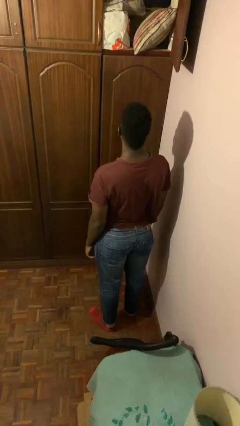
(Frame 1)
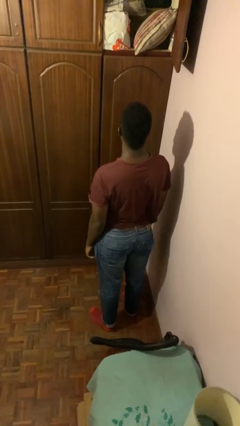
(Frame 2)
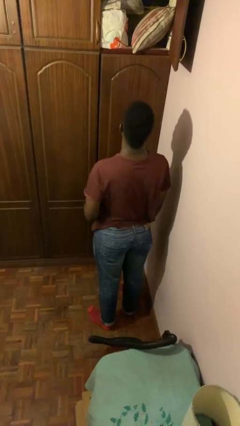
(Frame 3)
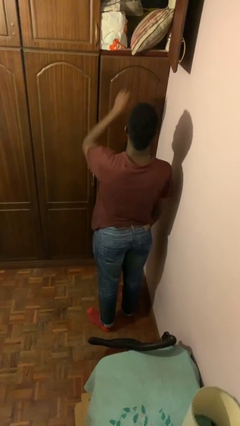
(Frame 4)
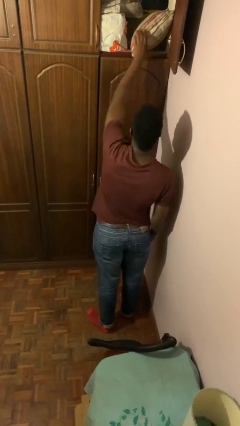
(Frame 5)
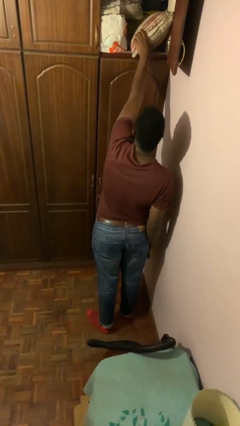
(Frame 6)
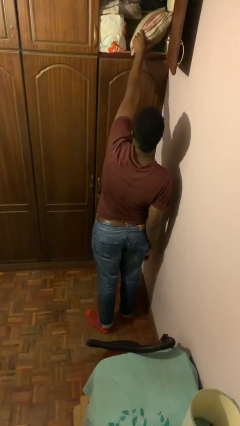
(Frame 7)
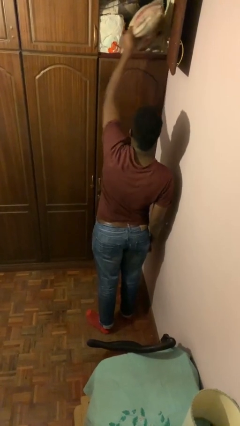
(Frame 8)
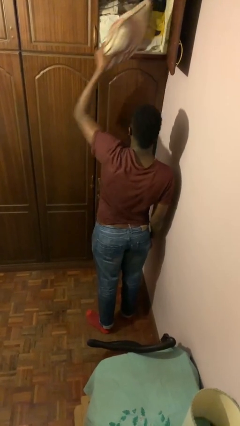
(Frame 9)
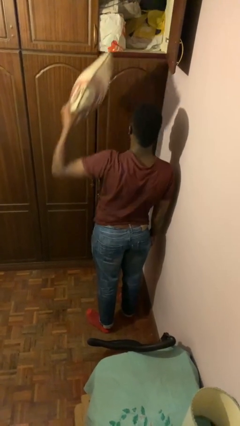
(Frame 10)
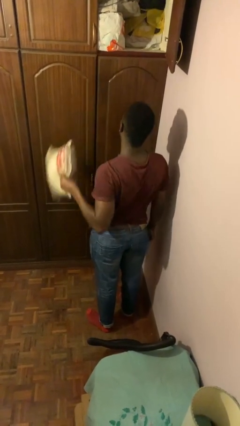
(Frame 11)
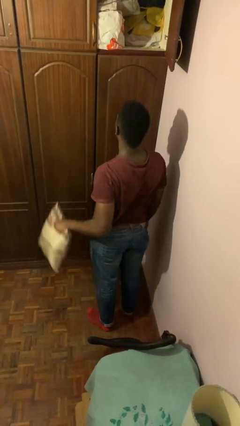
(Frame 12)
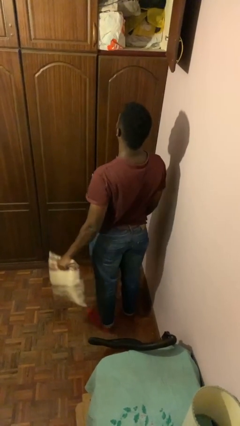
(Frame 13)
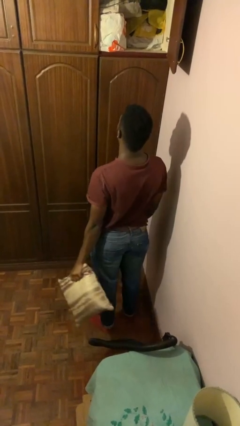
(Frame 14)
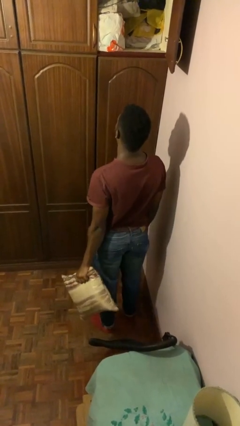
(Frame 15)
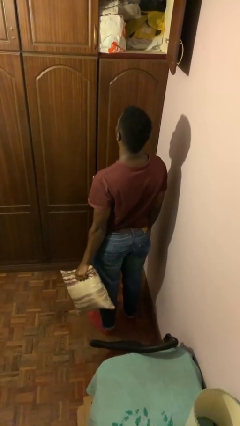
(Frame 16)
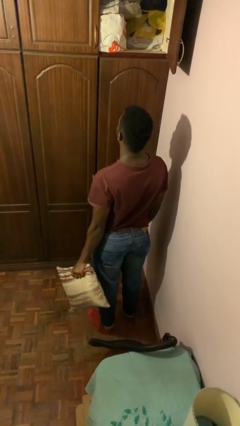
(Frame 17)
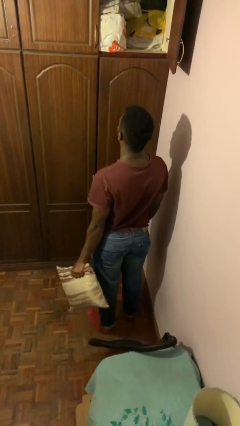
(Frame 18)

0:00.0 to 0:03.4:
person picks up object from shelf

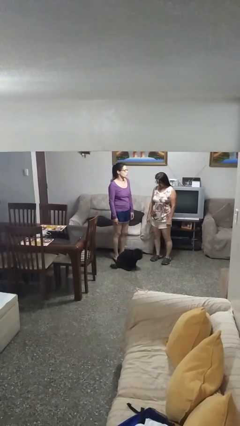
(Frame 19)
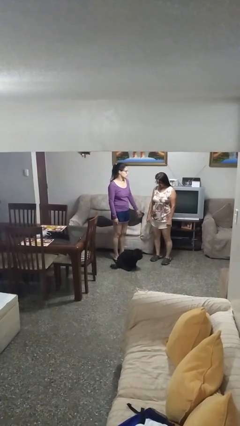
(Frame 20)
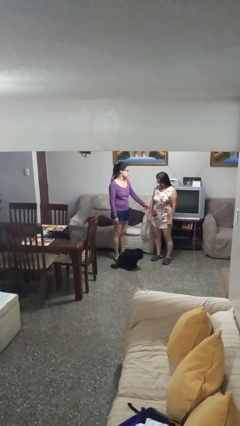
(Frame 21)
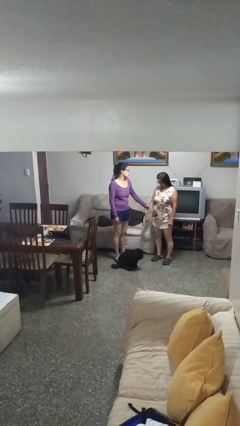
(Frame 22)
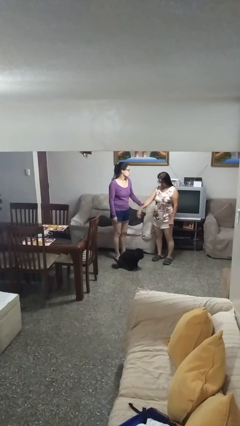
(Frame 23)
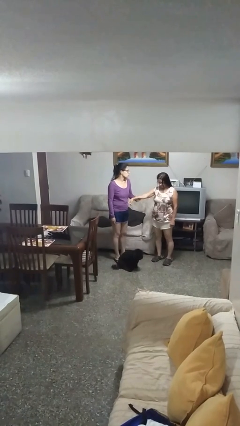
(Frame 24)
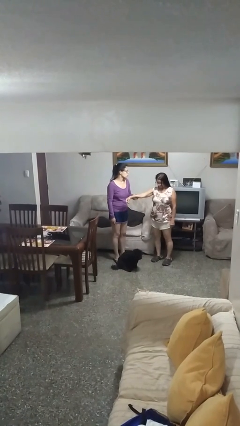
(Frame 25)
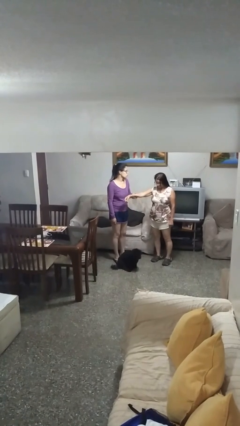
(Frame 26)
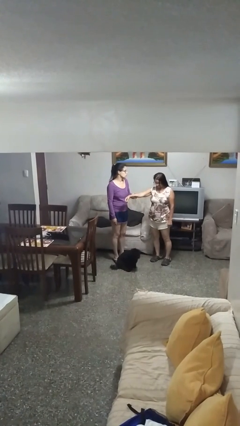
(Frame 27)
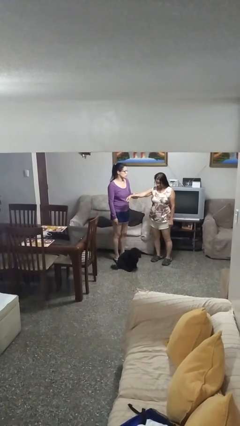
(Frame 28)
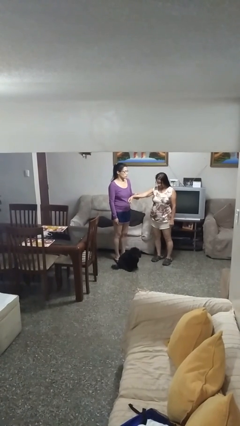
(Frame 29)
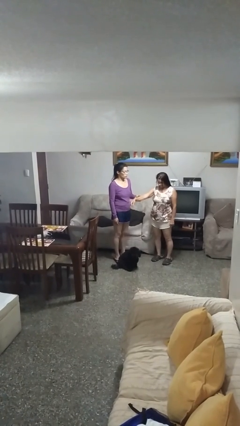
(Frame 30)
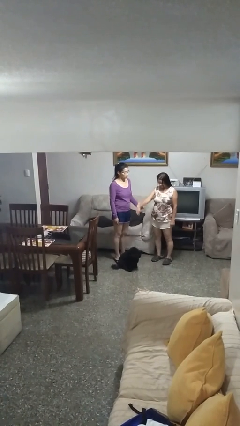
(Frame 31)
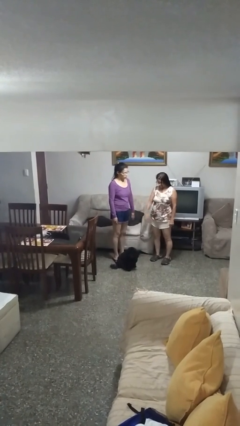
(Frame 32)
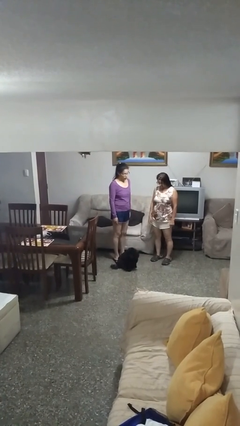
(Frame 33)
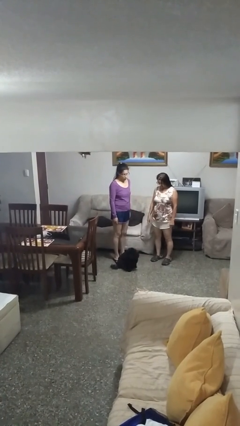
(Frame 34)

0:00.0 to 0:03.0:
person grabs person by forearm

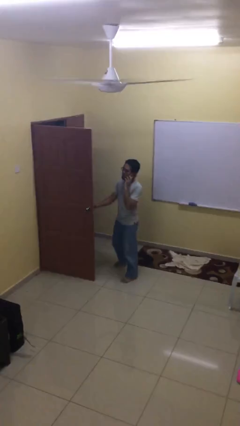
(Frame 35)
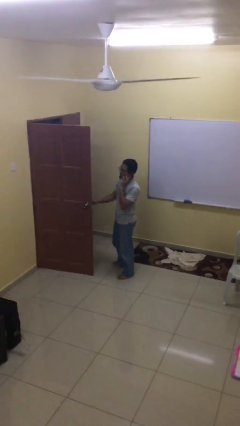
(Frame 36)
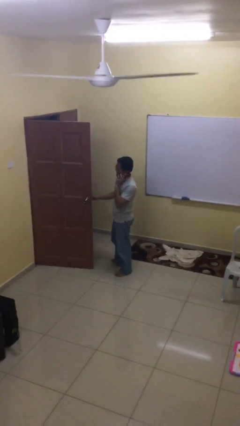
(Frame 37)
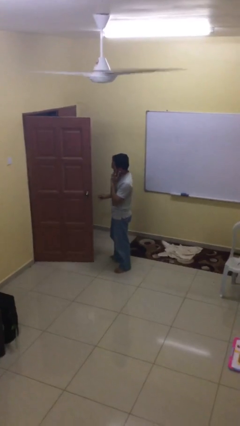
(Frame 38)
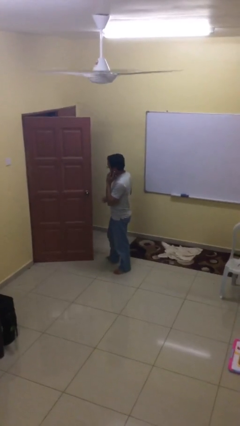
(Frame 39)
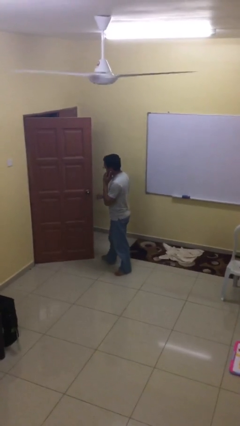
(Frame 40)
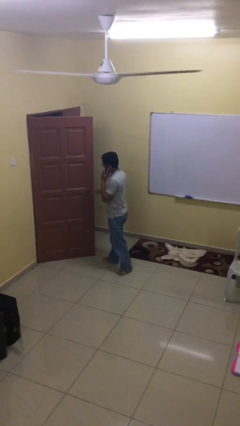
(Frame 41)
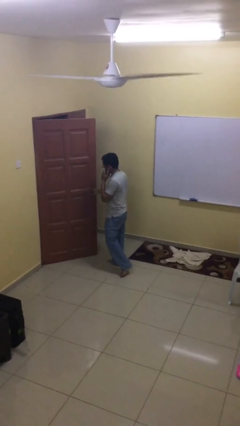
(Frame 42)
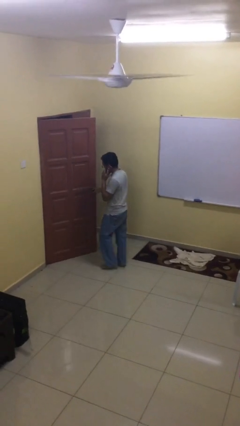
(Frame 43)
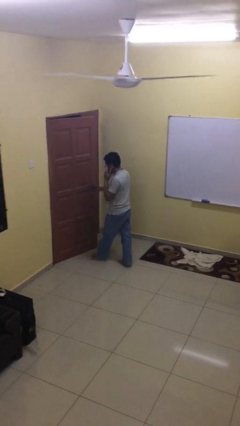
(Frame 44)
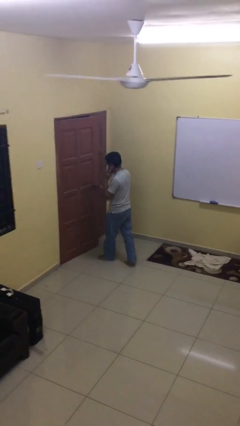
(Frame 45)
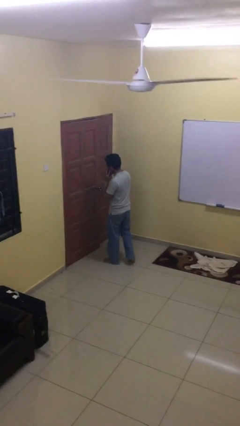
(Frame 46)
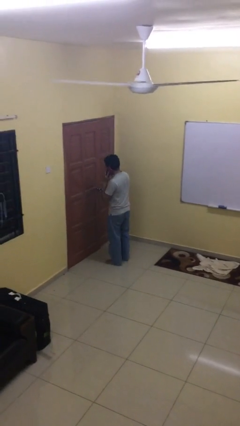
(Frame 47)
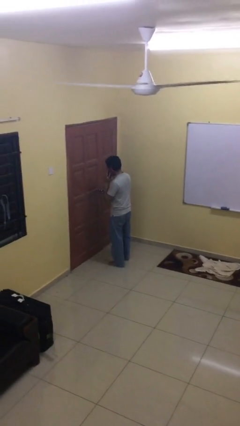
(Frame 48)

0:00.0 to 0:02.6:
person closes facility door

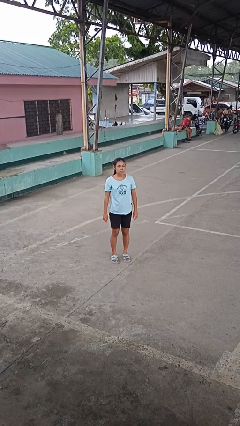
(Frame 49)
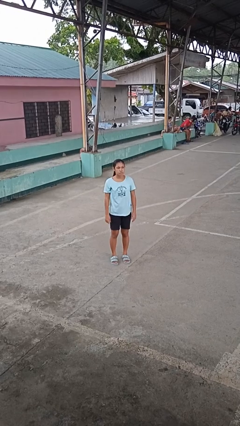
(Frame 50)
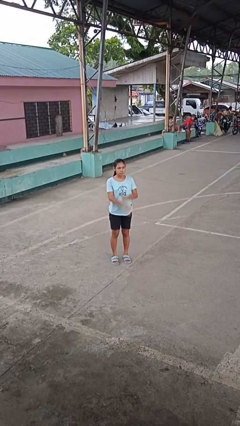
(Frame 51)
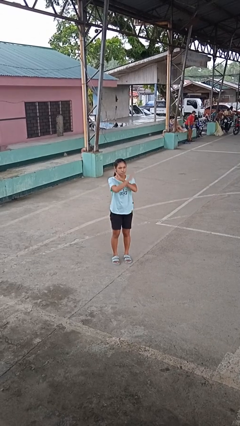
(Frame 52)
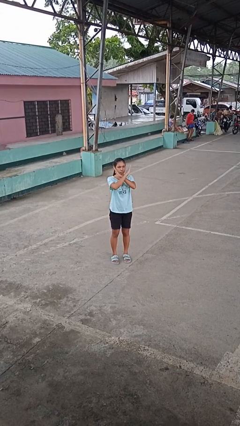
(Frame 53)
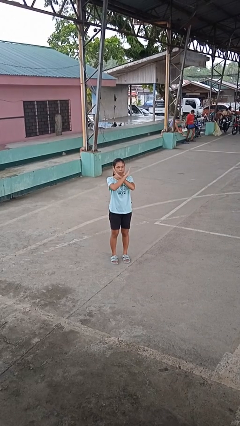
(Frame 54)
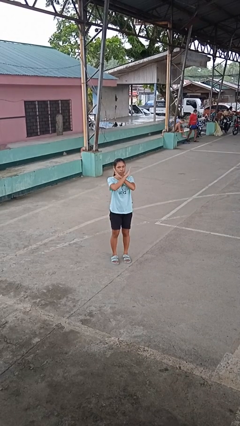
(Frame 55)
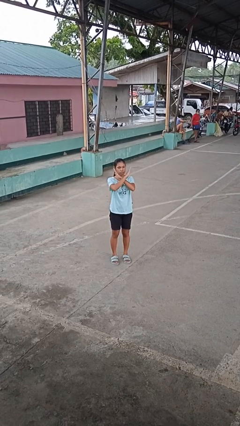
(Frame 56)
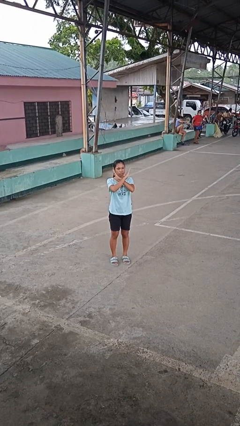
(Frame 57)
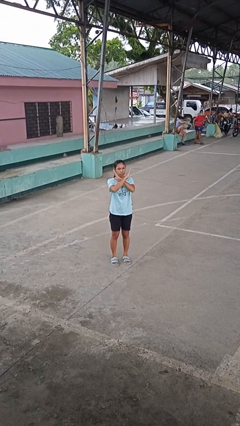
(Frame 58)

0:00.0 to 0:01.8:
person gestures arms x

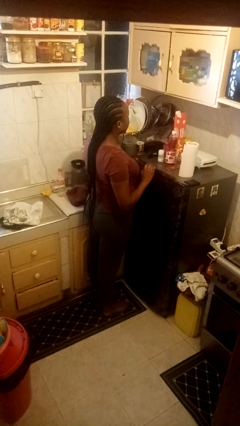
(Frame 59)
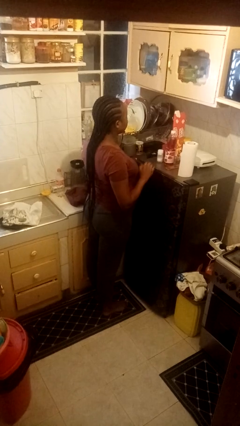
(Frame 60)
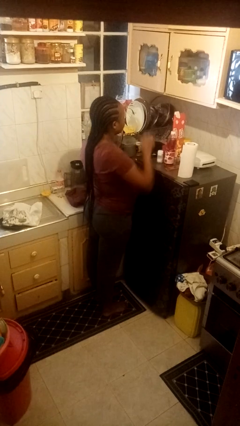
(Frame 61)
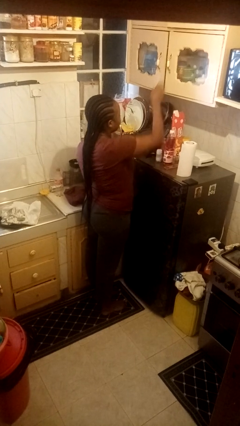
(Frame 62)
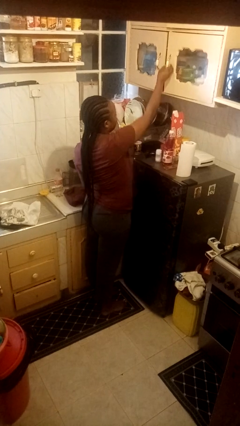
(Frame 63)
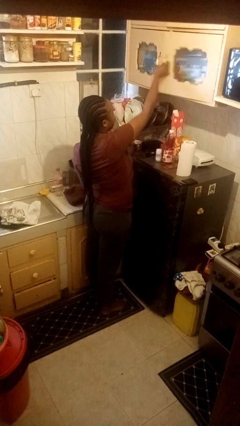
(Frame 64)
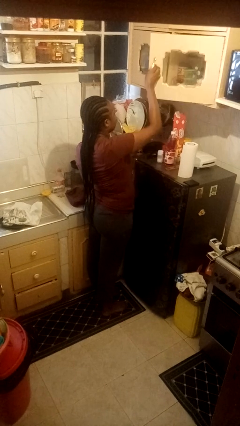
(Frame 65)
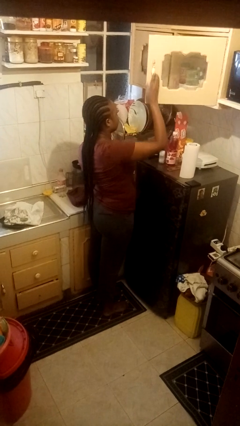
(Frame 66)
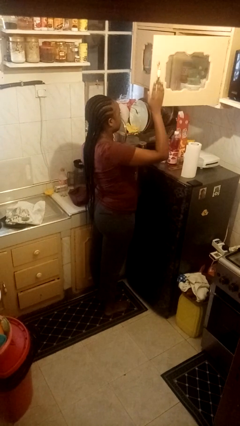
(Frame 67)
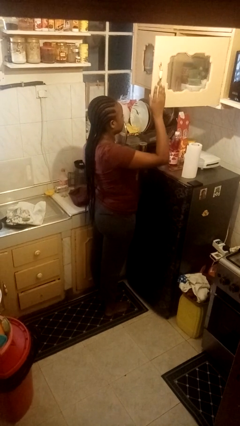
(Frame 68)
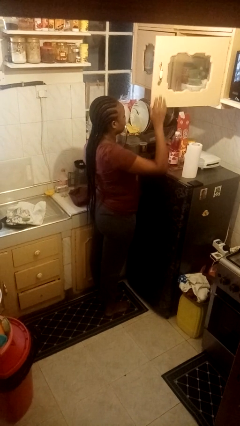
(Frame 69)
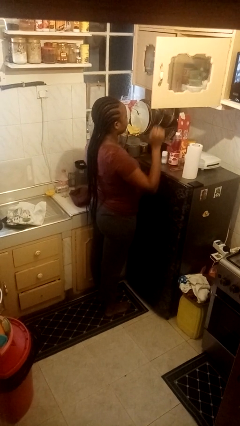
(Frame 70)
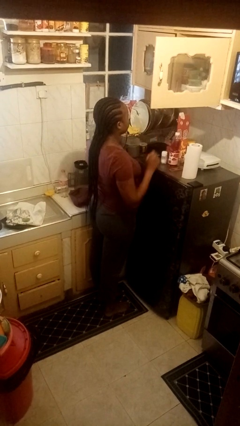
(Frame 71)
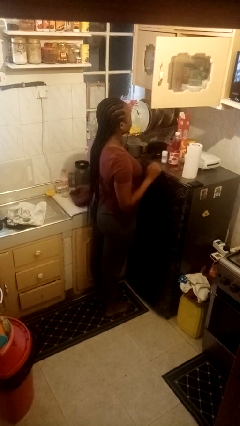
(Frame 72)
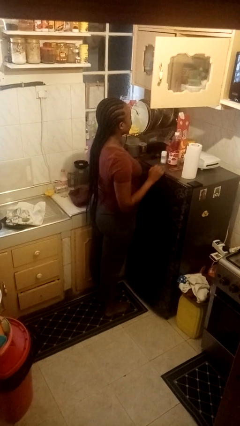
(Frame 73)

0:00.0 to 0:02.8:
person opens cabinet

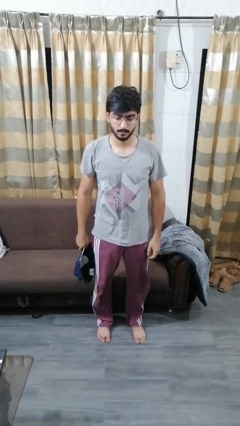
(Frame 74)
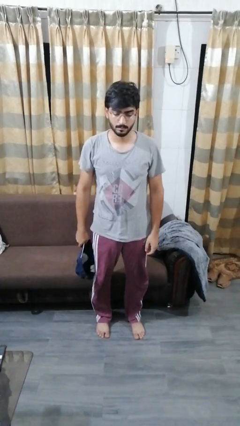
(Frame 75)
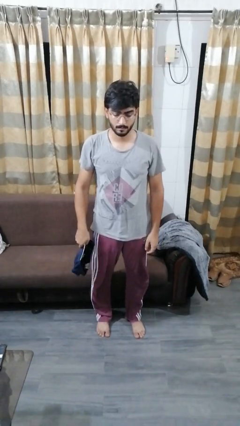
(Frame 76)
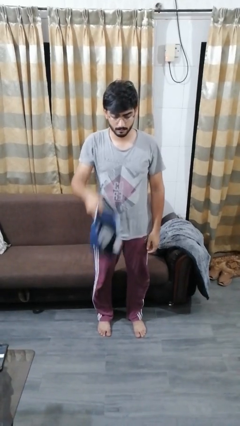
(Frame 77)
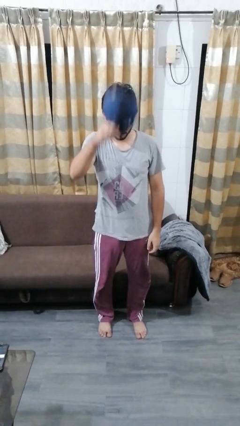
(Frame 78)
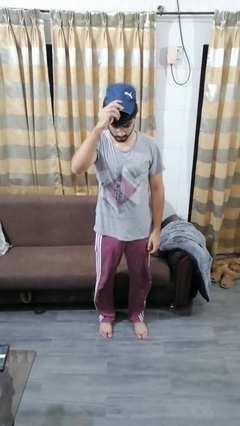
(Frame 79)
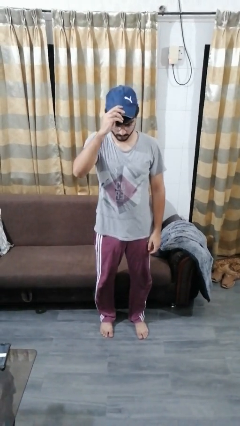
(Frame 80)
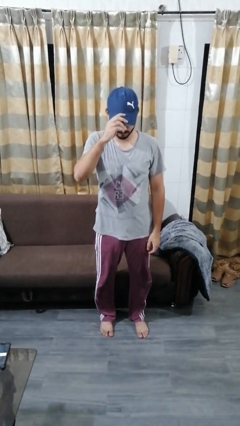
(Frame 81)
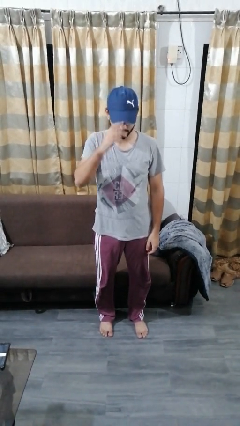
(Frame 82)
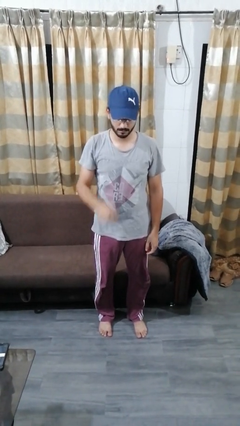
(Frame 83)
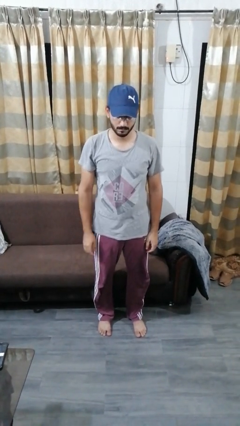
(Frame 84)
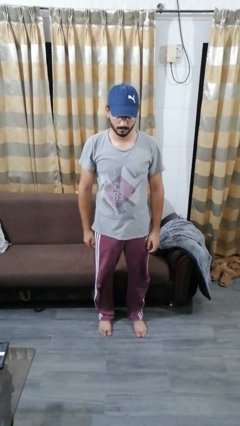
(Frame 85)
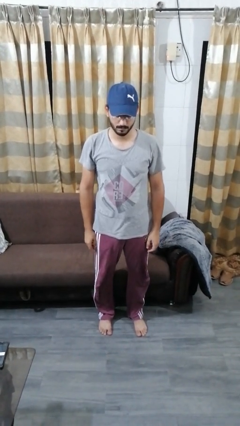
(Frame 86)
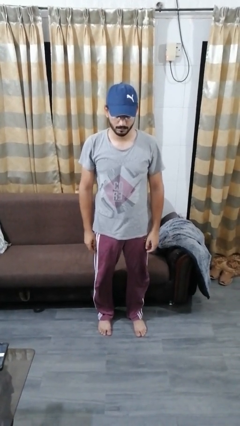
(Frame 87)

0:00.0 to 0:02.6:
person puts on hat

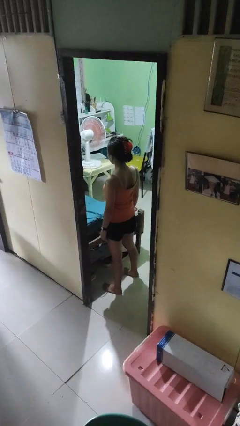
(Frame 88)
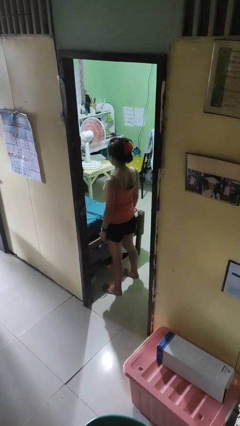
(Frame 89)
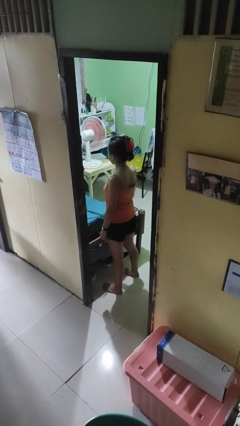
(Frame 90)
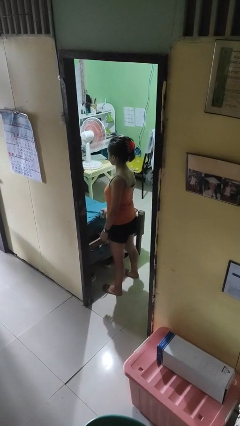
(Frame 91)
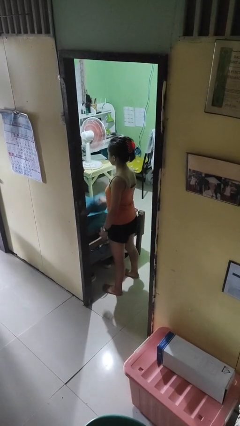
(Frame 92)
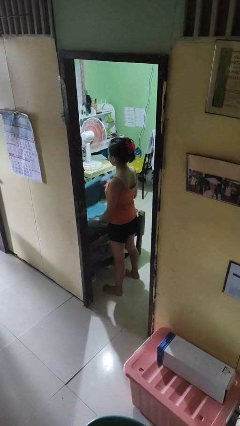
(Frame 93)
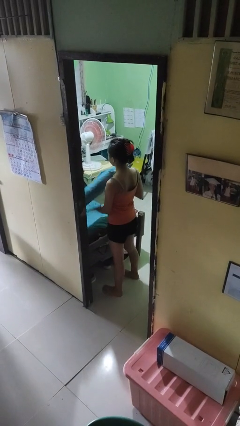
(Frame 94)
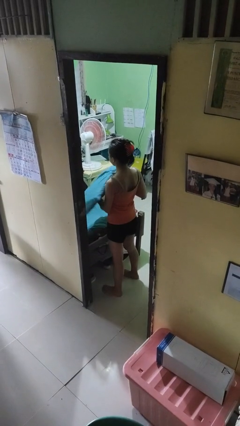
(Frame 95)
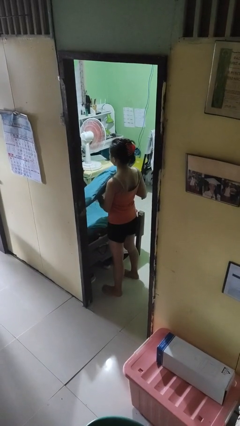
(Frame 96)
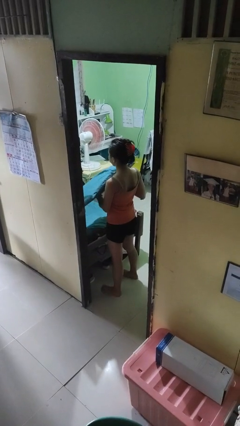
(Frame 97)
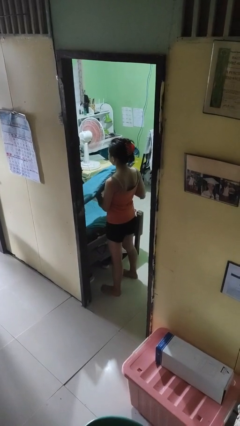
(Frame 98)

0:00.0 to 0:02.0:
person picks up object from bed
